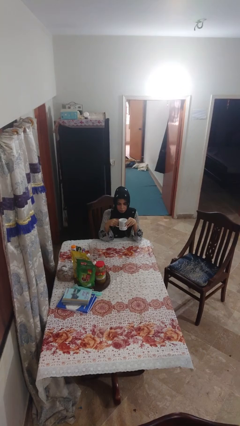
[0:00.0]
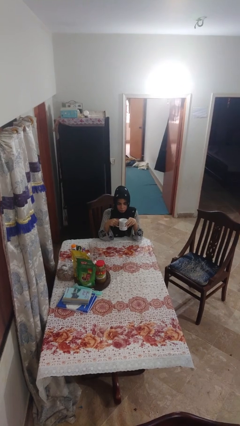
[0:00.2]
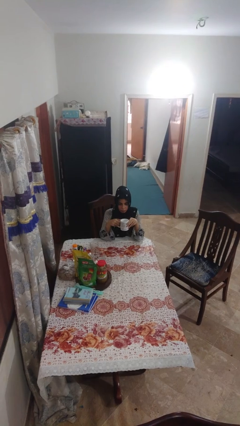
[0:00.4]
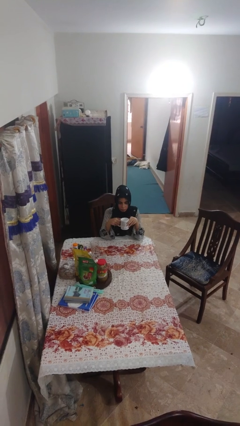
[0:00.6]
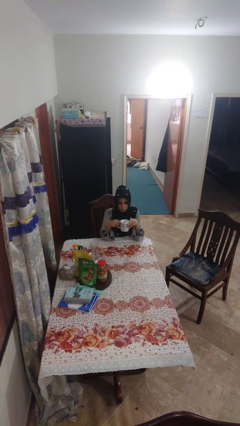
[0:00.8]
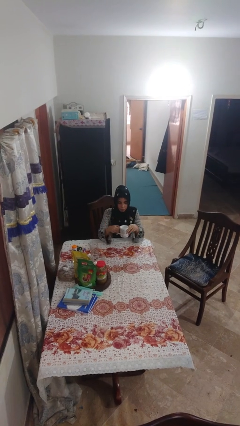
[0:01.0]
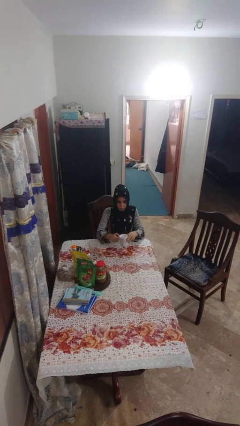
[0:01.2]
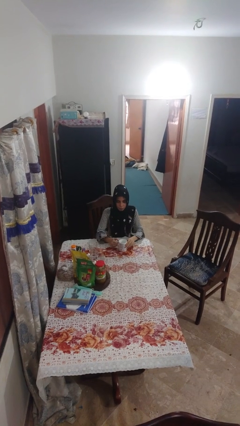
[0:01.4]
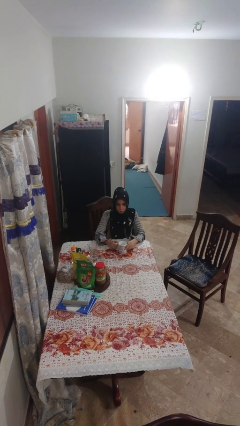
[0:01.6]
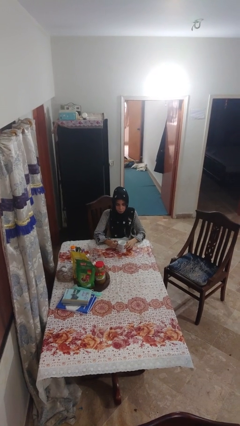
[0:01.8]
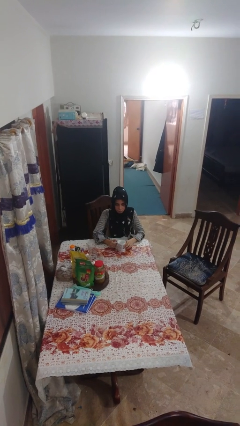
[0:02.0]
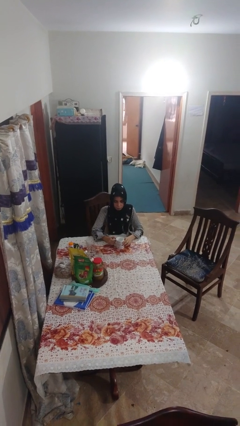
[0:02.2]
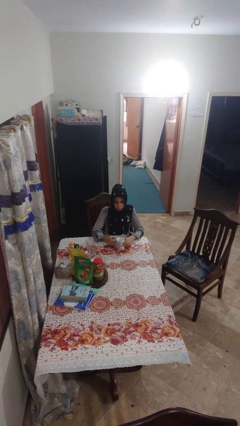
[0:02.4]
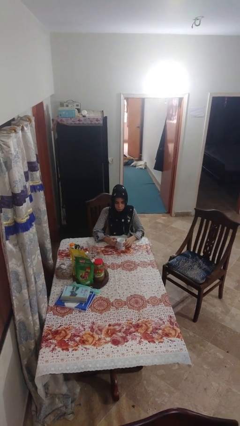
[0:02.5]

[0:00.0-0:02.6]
person puts down object on table

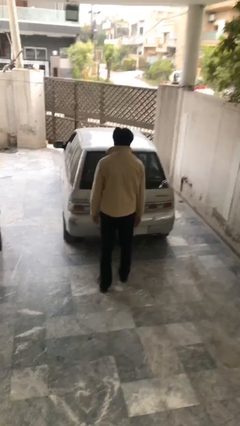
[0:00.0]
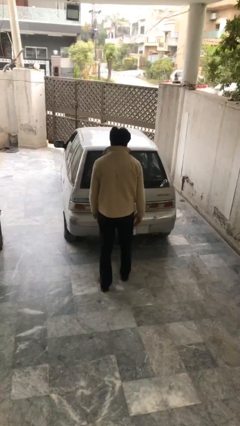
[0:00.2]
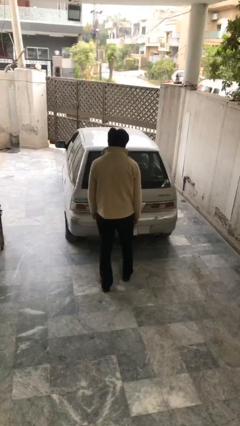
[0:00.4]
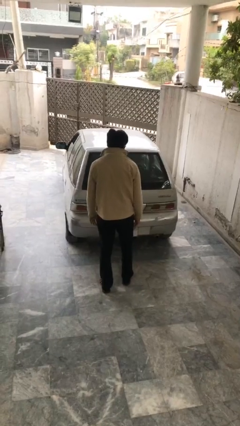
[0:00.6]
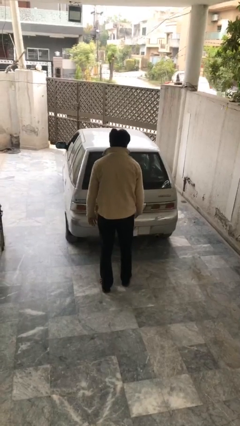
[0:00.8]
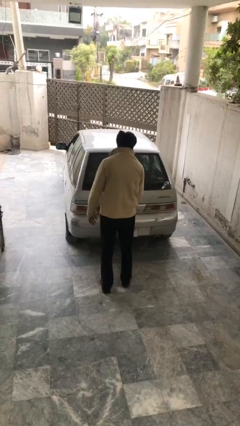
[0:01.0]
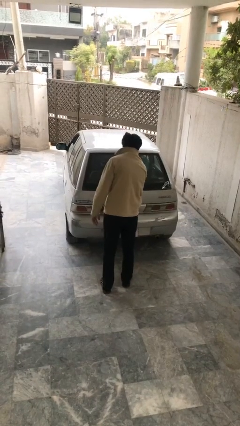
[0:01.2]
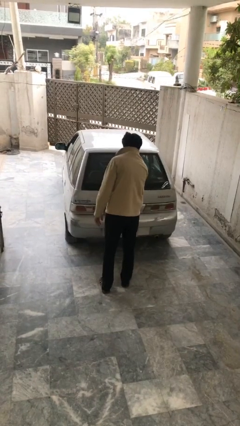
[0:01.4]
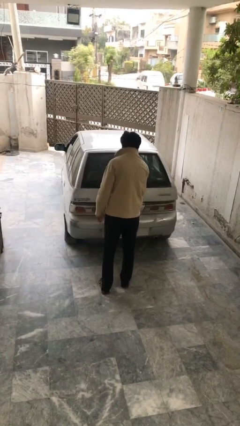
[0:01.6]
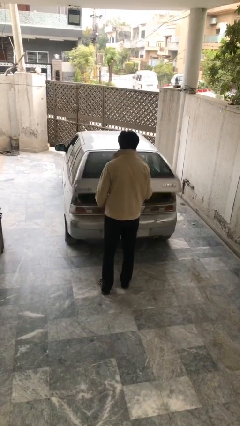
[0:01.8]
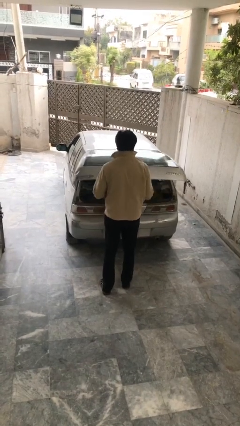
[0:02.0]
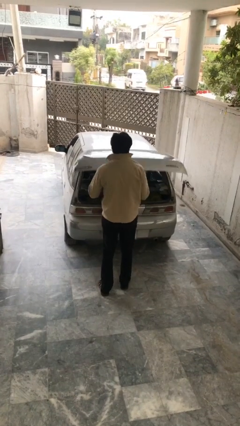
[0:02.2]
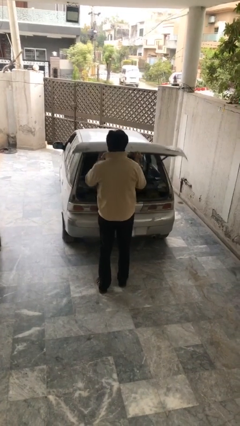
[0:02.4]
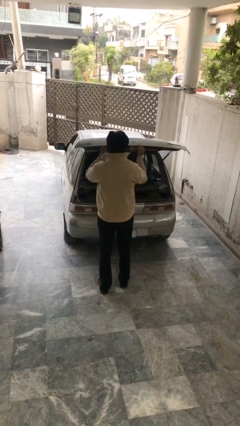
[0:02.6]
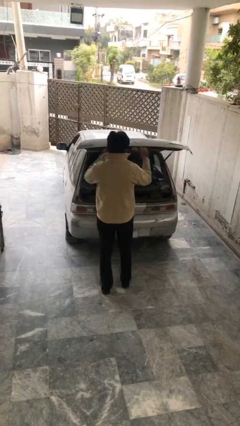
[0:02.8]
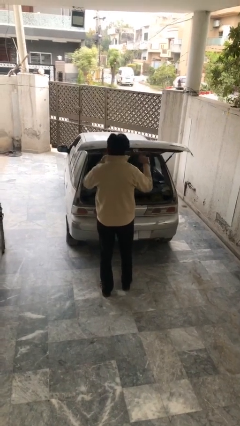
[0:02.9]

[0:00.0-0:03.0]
person opens car trunk

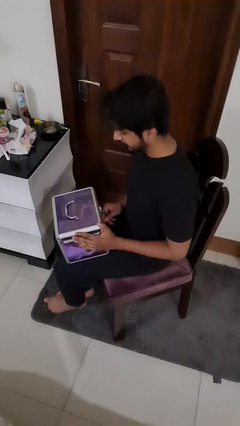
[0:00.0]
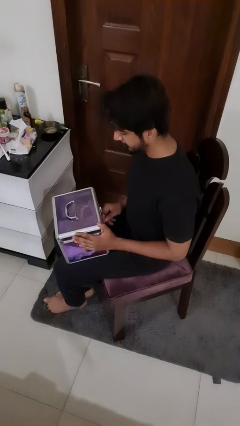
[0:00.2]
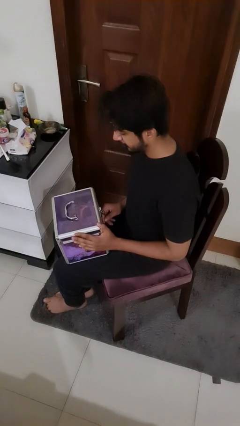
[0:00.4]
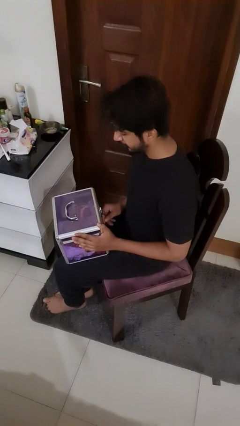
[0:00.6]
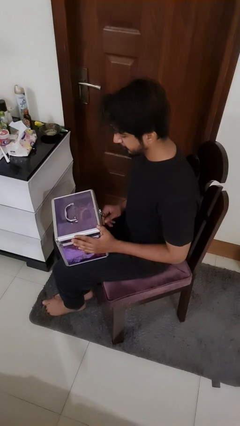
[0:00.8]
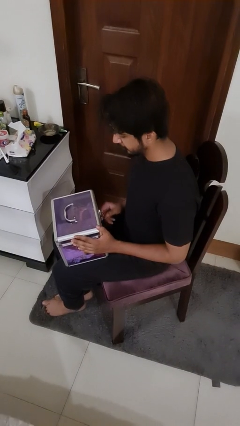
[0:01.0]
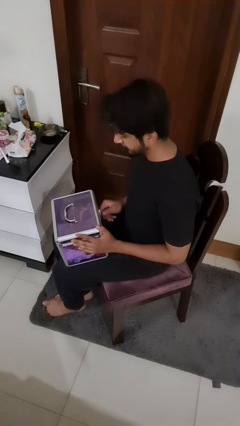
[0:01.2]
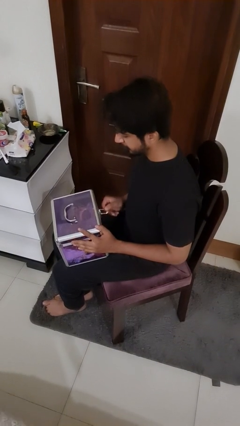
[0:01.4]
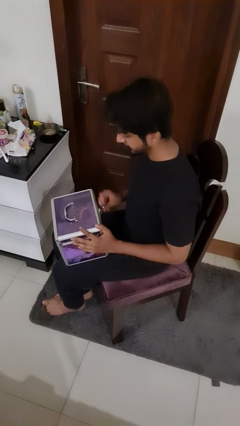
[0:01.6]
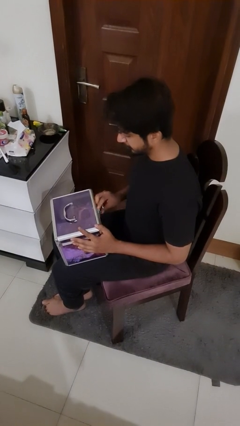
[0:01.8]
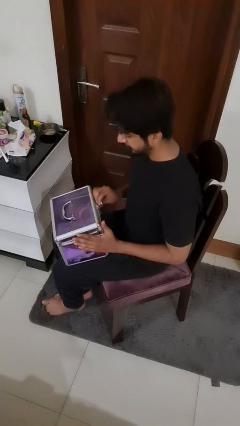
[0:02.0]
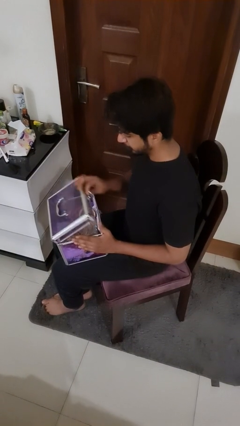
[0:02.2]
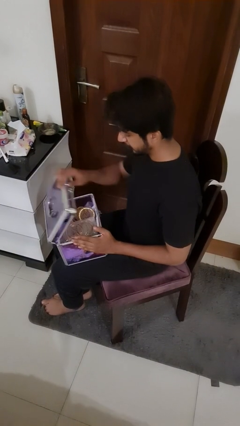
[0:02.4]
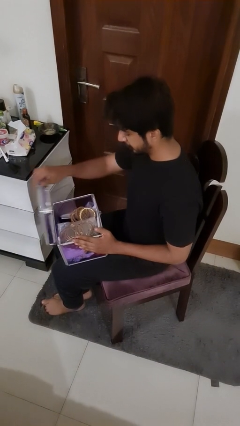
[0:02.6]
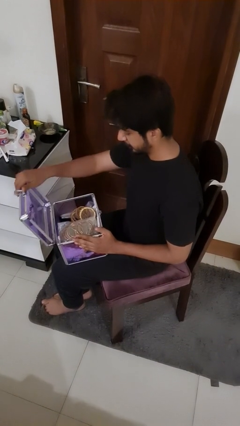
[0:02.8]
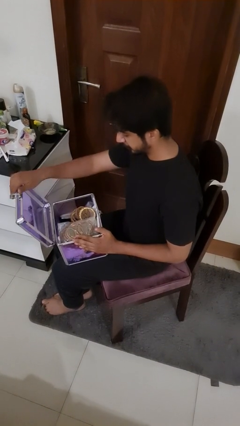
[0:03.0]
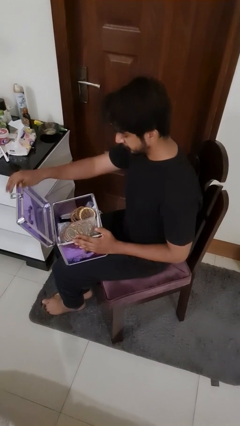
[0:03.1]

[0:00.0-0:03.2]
person opens jewelry box

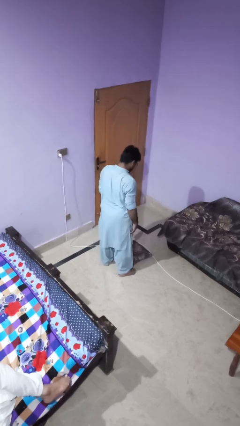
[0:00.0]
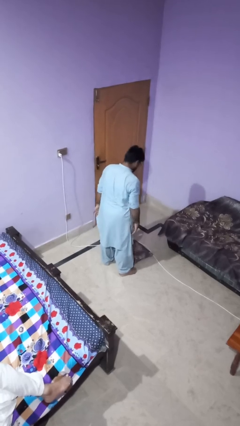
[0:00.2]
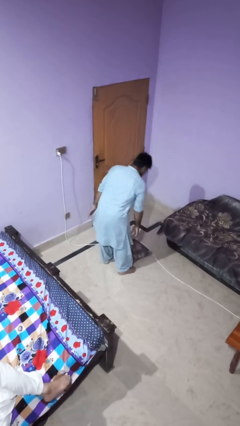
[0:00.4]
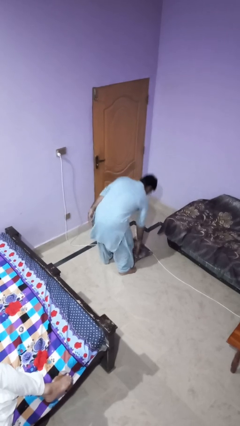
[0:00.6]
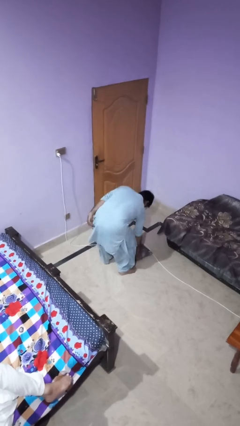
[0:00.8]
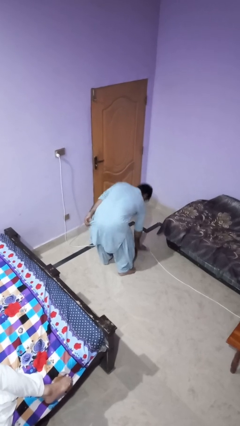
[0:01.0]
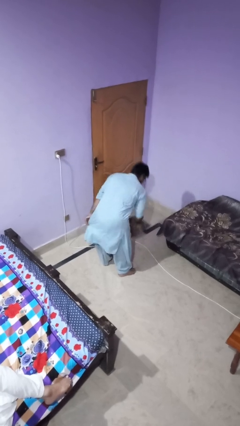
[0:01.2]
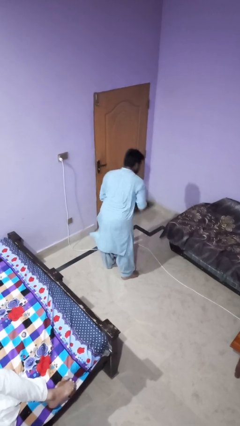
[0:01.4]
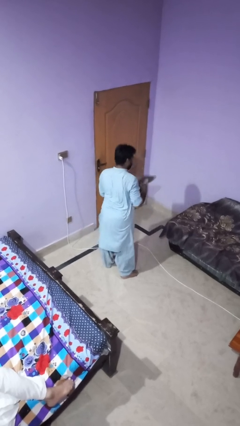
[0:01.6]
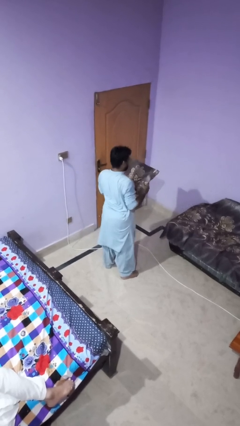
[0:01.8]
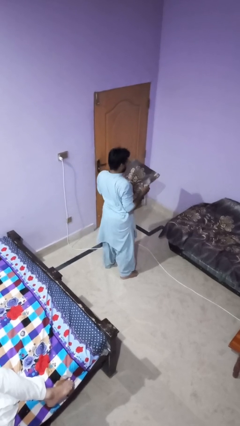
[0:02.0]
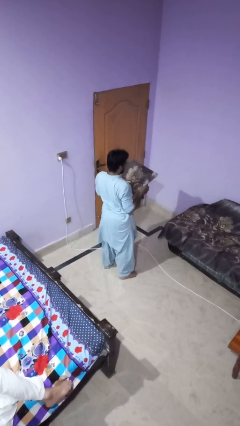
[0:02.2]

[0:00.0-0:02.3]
person picks up object from floor

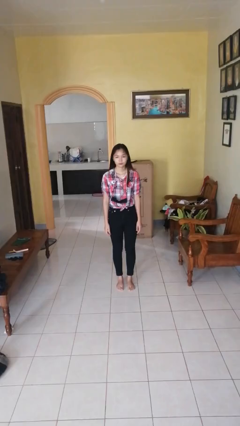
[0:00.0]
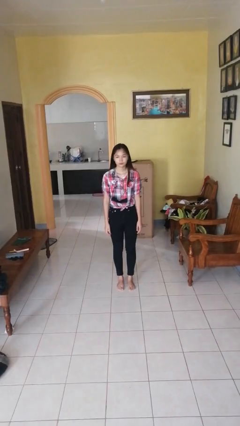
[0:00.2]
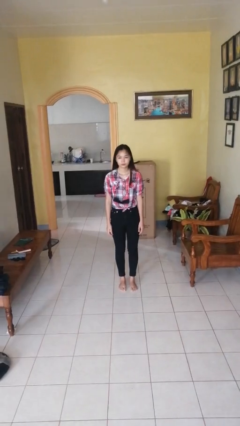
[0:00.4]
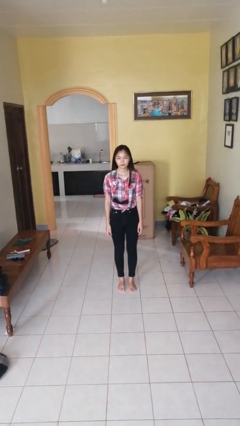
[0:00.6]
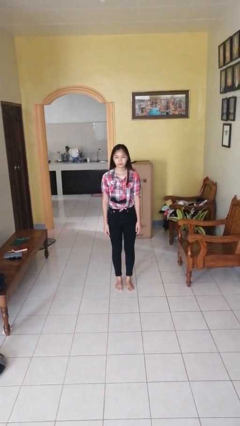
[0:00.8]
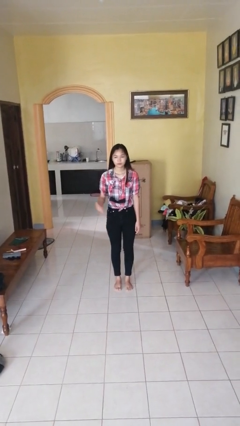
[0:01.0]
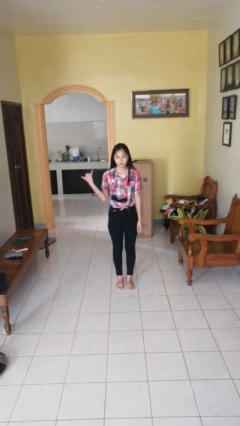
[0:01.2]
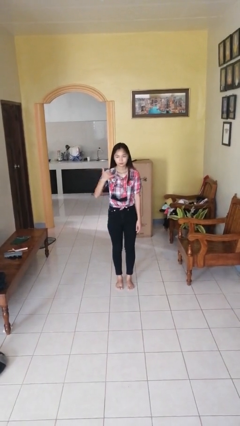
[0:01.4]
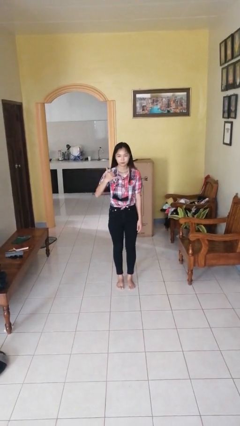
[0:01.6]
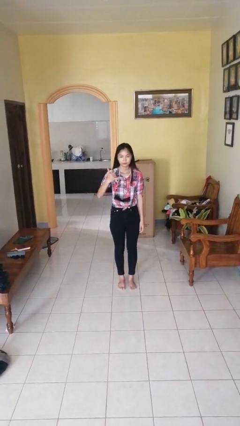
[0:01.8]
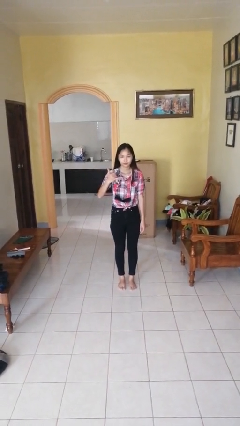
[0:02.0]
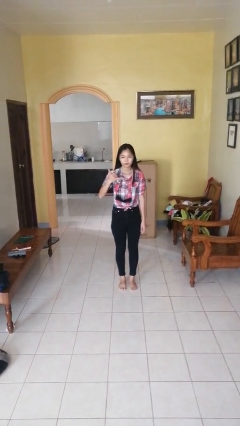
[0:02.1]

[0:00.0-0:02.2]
person gestures hang loose

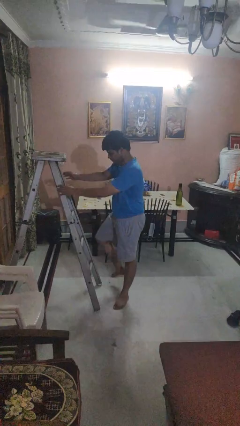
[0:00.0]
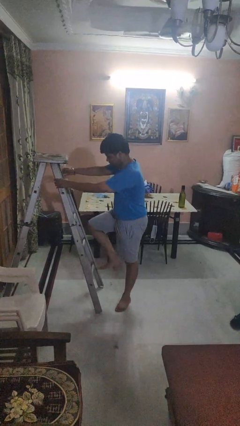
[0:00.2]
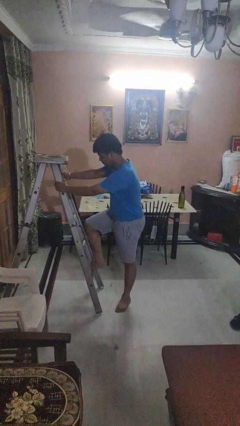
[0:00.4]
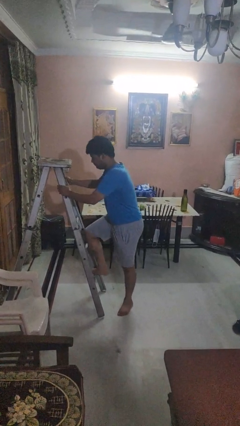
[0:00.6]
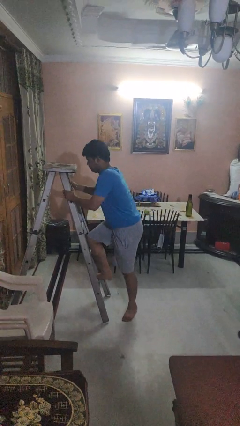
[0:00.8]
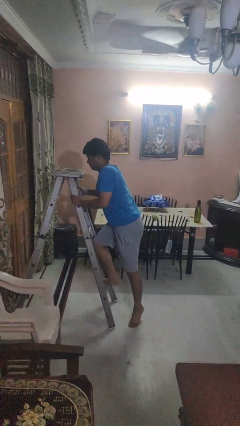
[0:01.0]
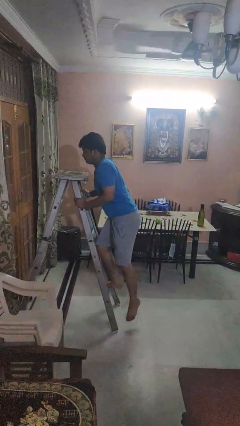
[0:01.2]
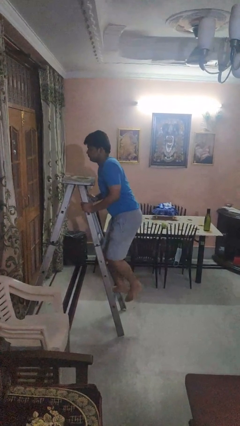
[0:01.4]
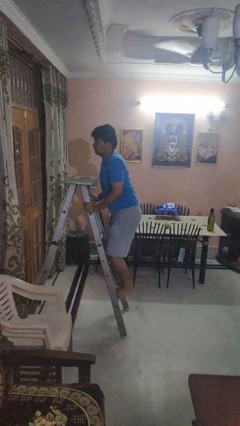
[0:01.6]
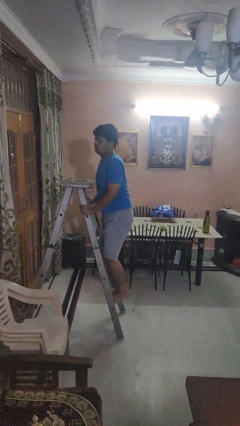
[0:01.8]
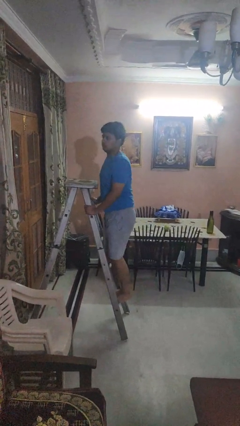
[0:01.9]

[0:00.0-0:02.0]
person climbs up ladder

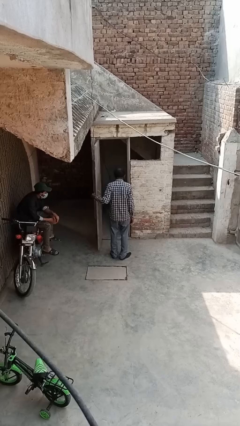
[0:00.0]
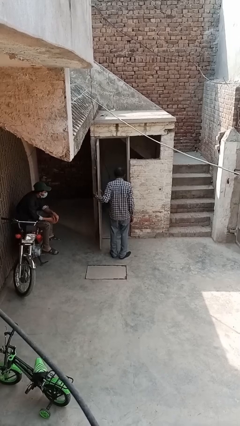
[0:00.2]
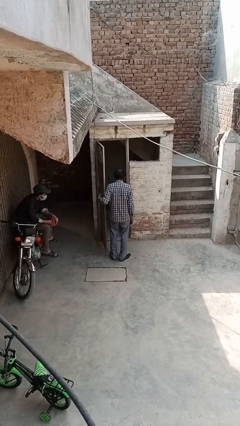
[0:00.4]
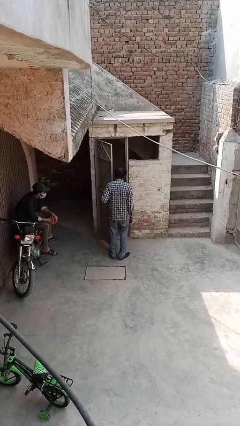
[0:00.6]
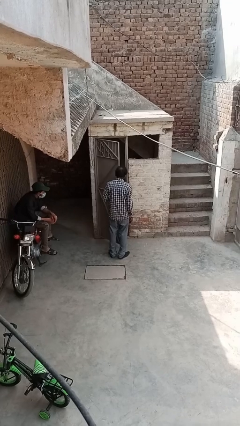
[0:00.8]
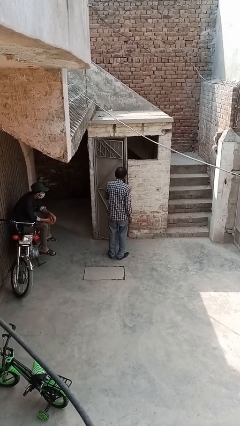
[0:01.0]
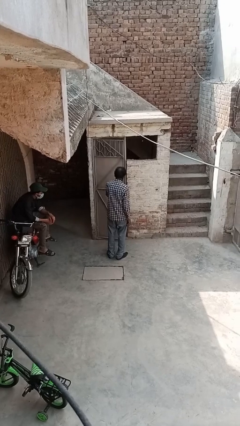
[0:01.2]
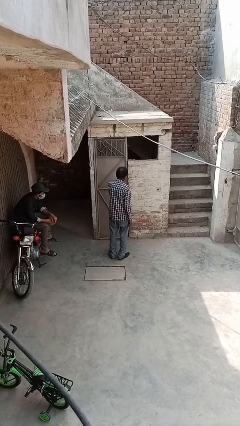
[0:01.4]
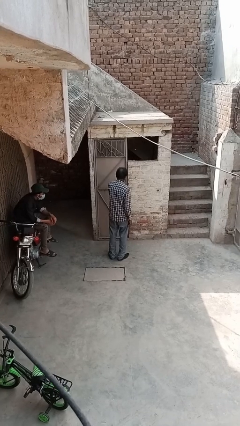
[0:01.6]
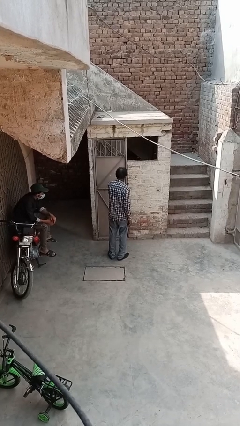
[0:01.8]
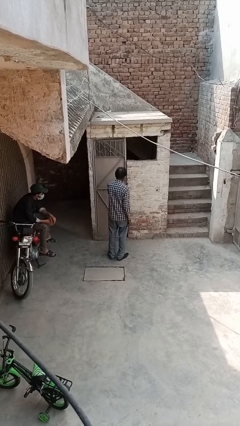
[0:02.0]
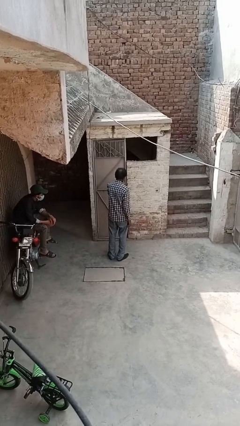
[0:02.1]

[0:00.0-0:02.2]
person closes facility door
